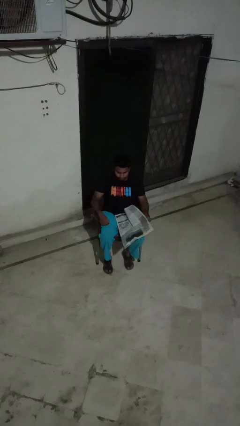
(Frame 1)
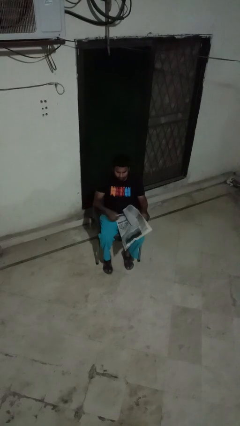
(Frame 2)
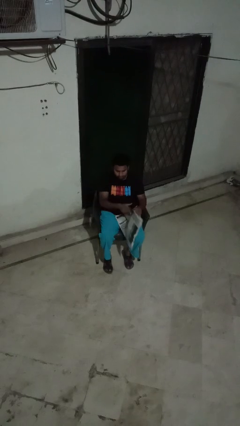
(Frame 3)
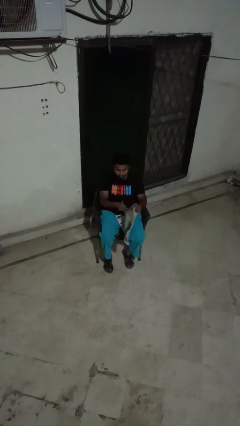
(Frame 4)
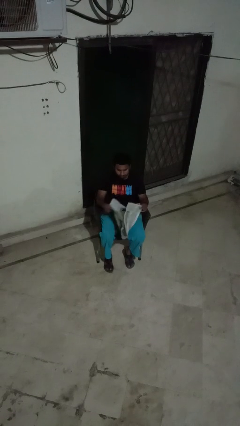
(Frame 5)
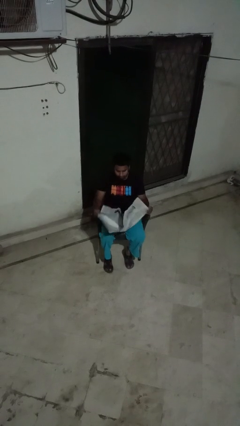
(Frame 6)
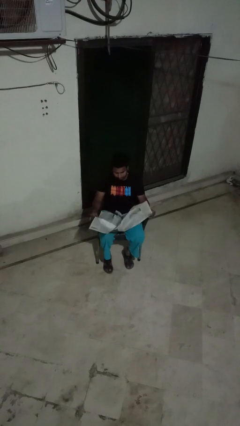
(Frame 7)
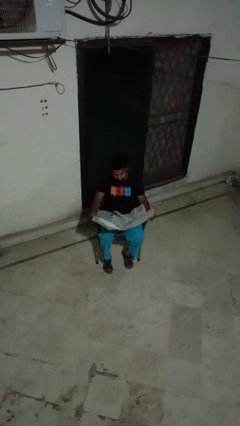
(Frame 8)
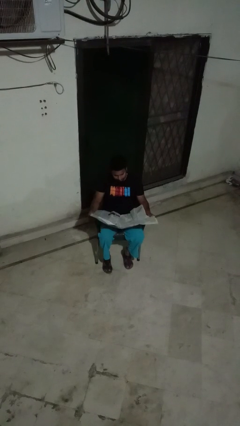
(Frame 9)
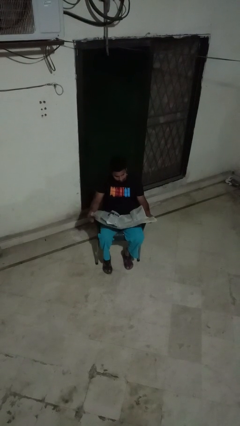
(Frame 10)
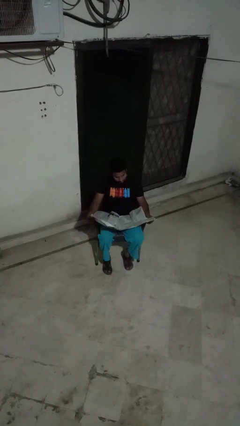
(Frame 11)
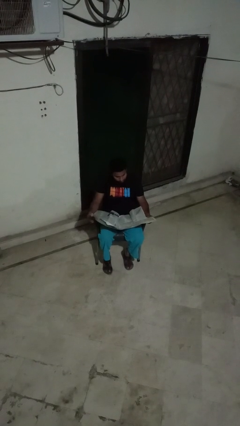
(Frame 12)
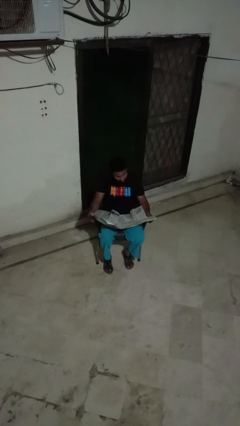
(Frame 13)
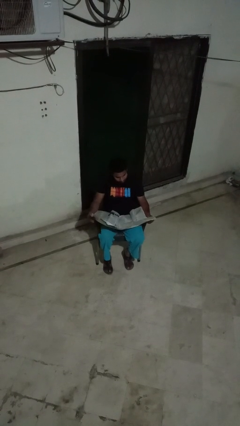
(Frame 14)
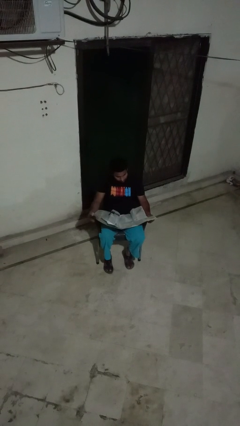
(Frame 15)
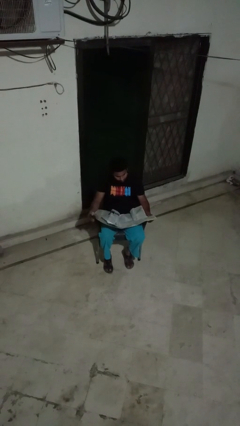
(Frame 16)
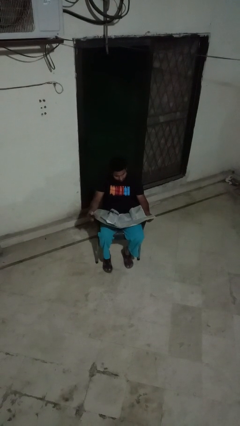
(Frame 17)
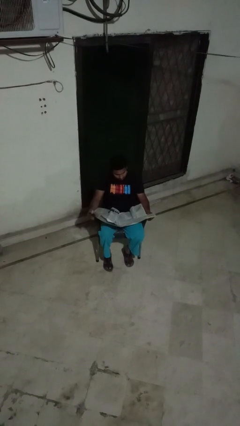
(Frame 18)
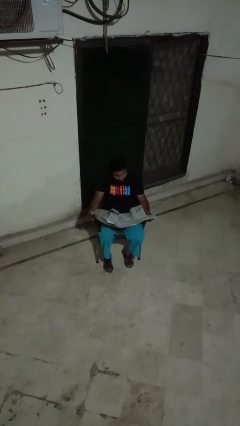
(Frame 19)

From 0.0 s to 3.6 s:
person reads newspaper

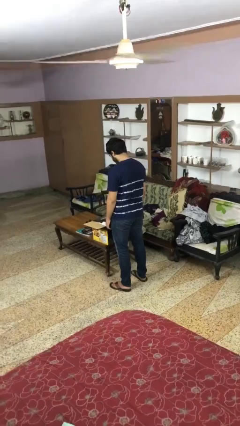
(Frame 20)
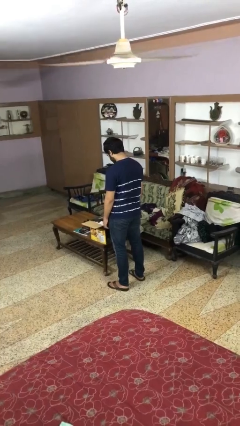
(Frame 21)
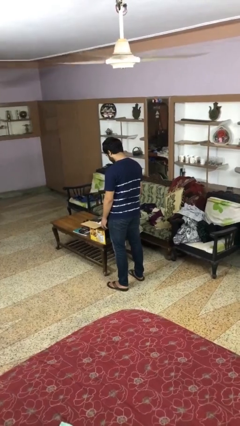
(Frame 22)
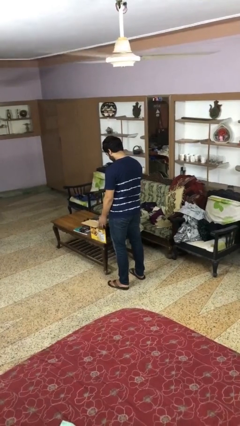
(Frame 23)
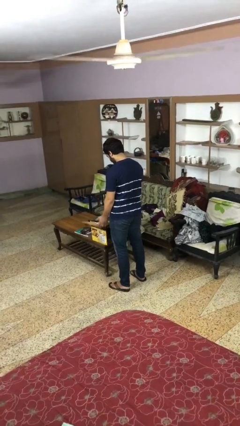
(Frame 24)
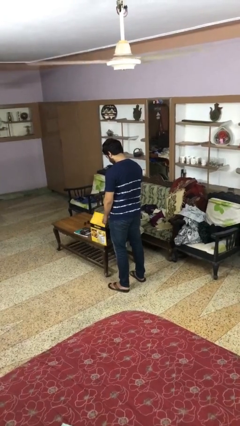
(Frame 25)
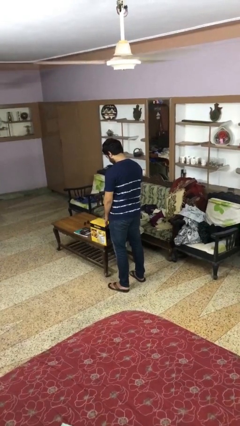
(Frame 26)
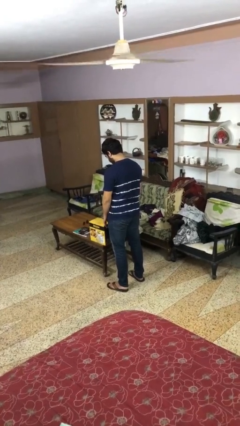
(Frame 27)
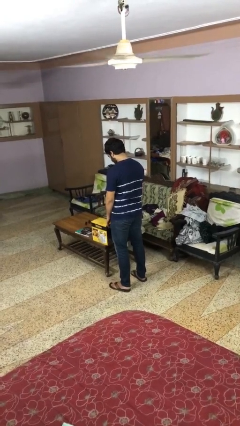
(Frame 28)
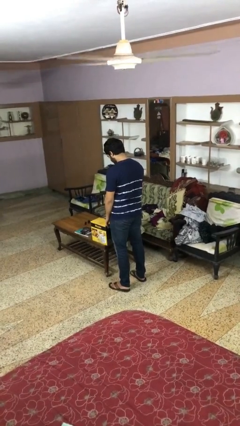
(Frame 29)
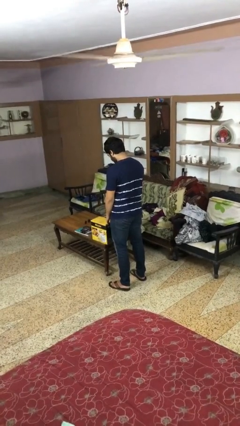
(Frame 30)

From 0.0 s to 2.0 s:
person closes box

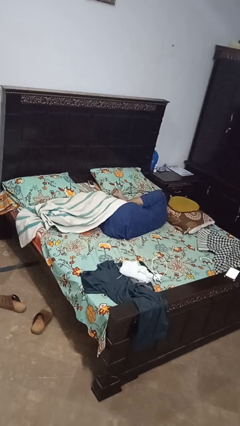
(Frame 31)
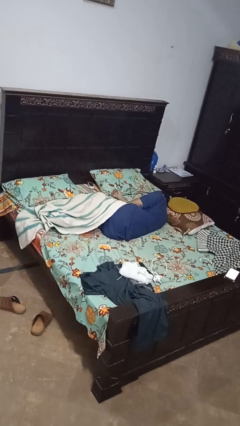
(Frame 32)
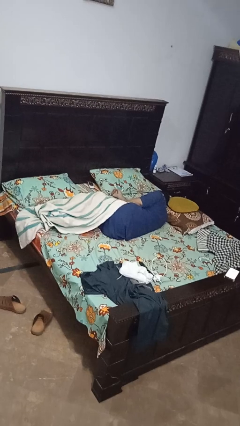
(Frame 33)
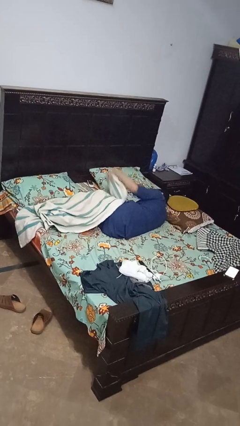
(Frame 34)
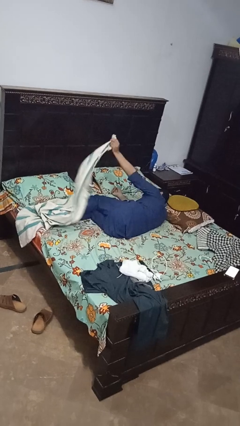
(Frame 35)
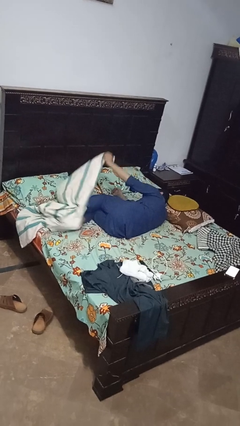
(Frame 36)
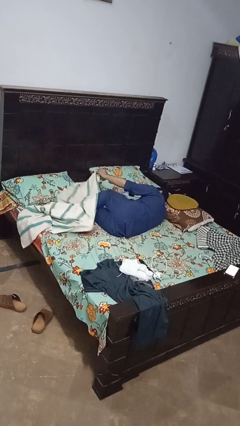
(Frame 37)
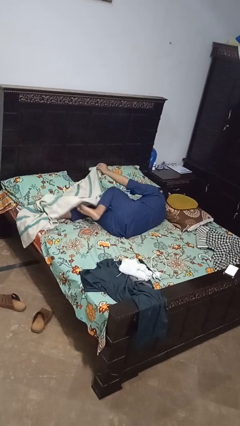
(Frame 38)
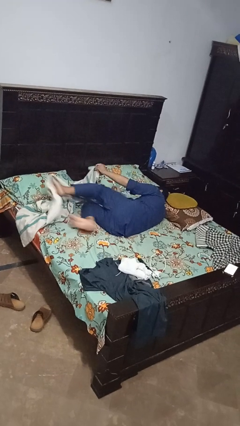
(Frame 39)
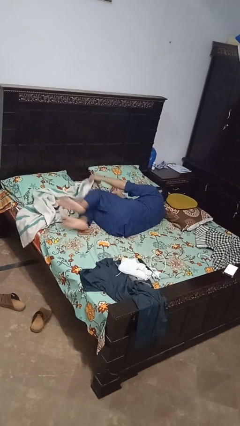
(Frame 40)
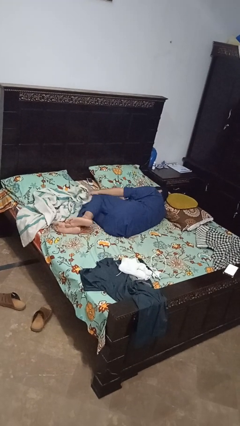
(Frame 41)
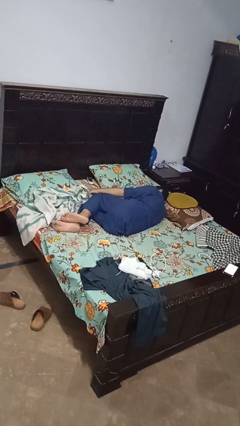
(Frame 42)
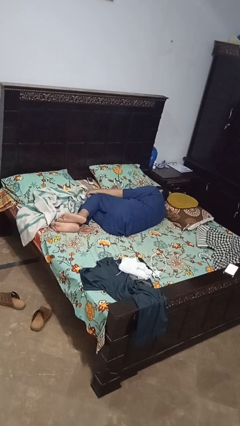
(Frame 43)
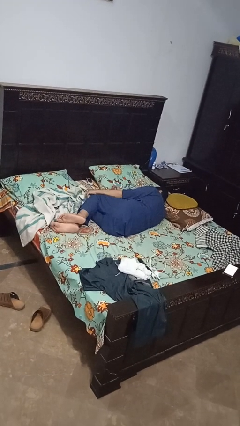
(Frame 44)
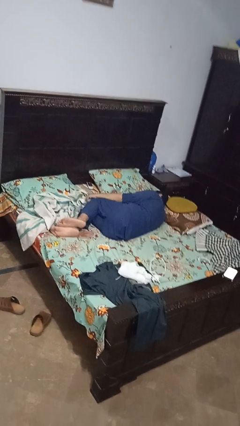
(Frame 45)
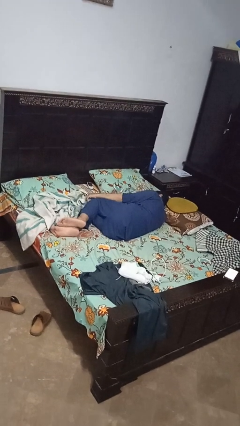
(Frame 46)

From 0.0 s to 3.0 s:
person uncovers with bedsheets

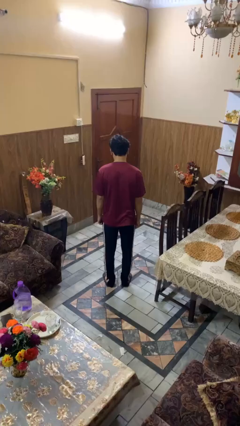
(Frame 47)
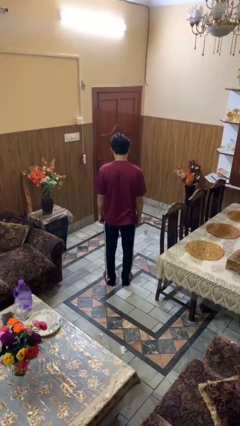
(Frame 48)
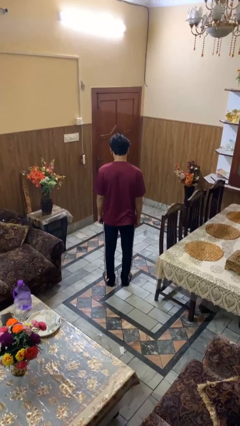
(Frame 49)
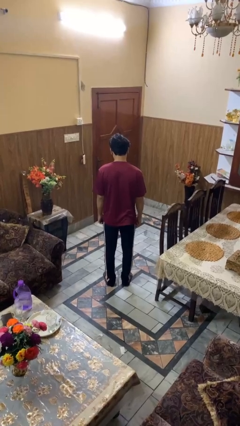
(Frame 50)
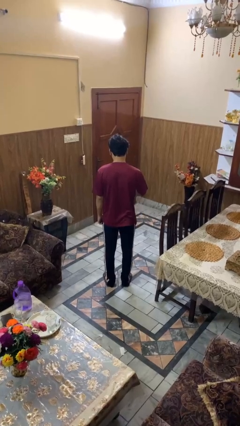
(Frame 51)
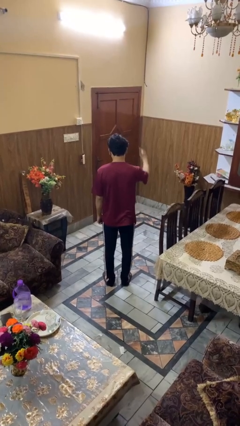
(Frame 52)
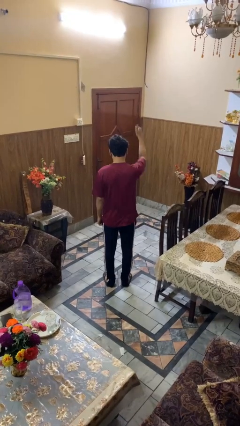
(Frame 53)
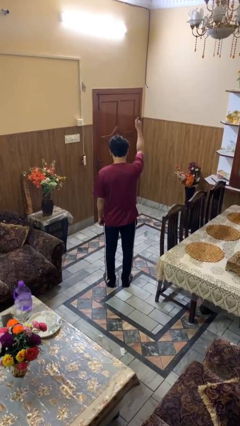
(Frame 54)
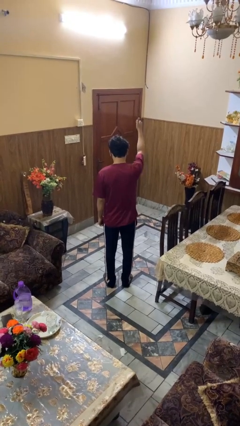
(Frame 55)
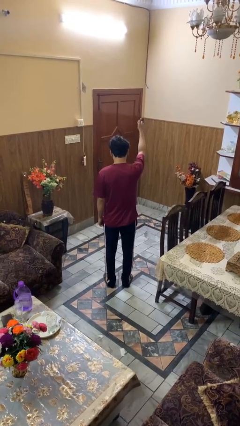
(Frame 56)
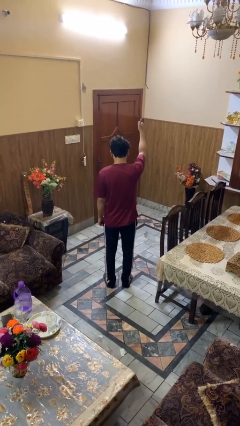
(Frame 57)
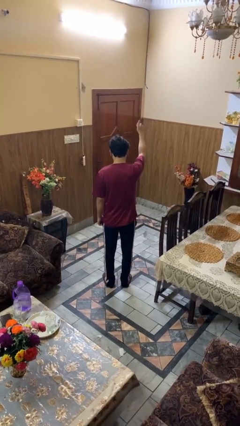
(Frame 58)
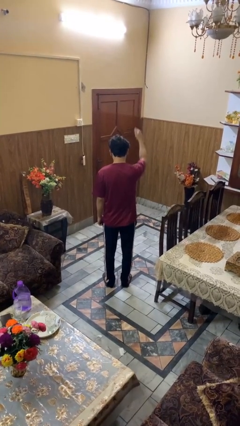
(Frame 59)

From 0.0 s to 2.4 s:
person gestures thumbs up

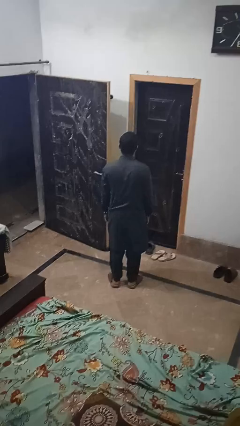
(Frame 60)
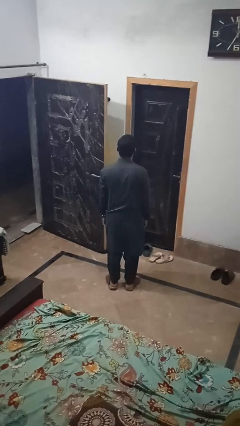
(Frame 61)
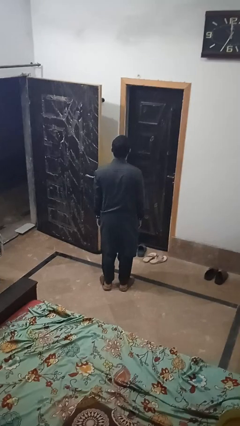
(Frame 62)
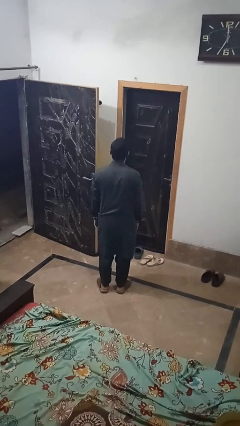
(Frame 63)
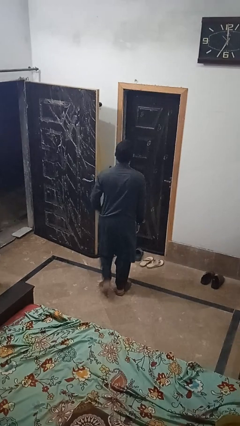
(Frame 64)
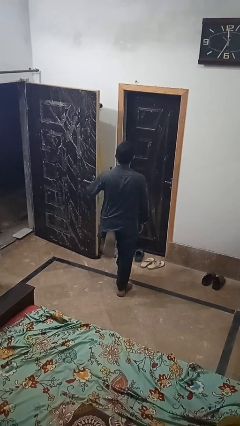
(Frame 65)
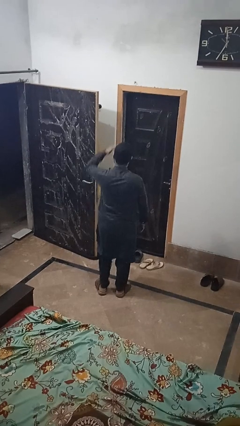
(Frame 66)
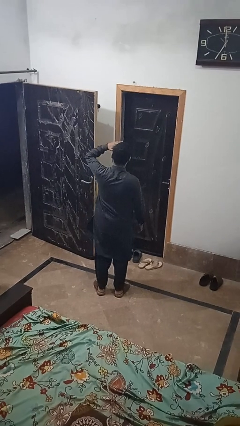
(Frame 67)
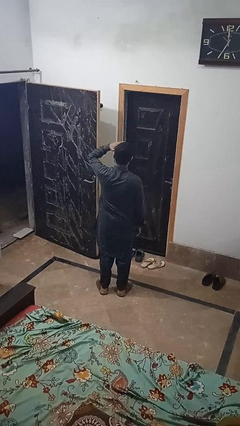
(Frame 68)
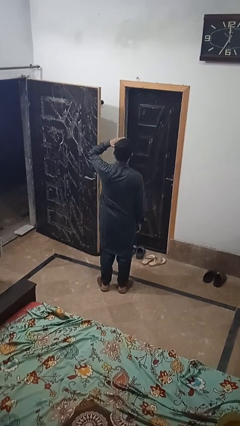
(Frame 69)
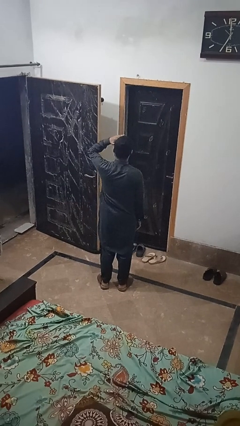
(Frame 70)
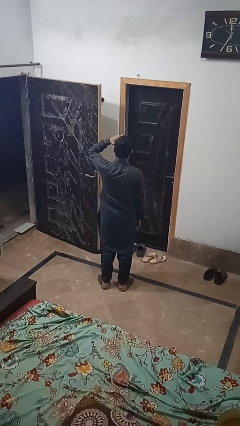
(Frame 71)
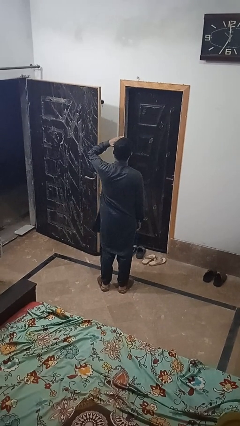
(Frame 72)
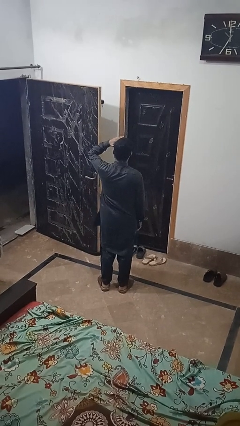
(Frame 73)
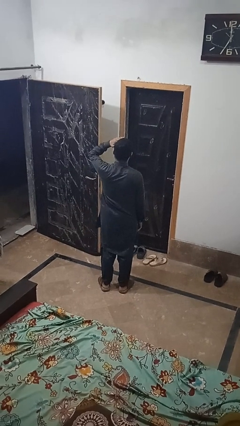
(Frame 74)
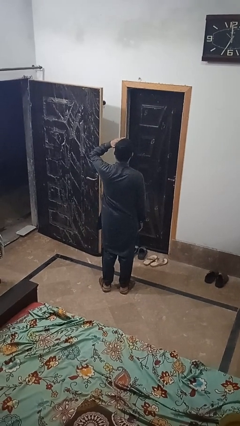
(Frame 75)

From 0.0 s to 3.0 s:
person salutes

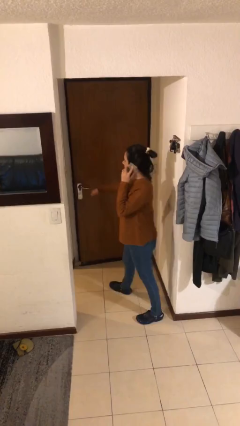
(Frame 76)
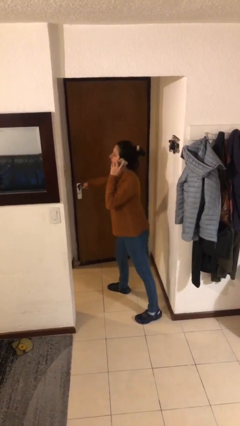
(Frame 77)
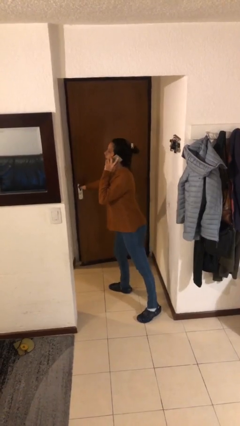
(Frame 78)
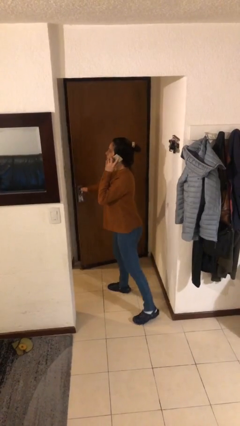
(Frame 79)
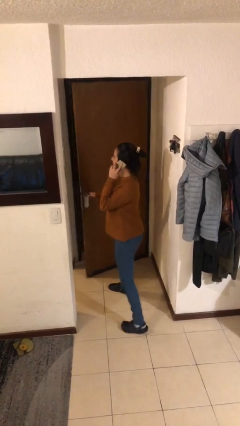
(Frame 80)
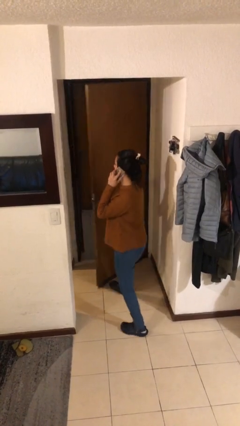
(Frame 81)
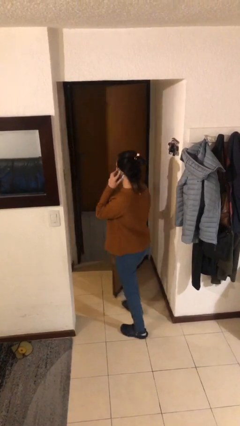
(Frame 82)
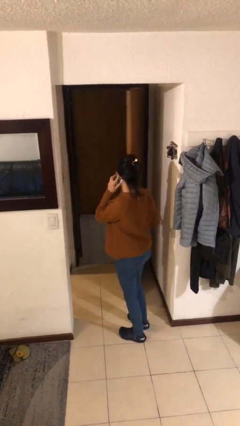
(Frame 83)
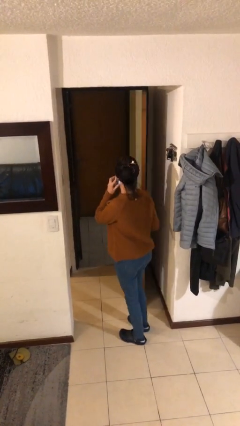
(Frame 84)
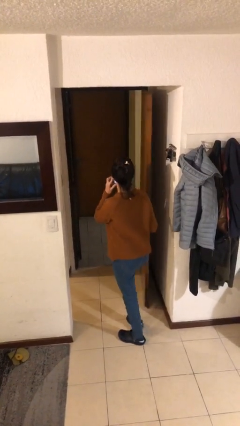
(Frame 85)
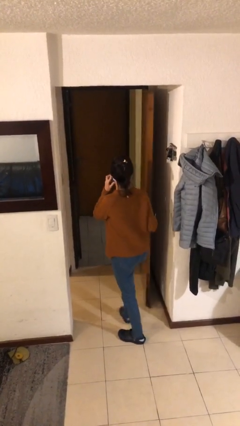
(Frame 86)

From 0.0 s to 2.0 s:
person opens facility door

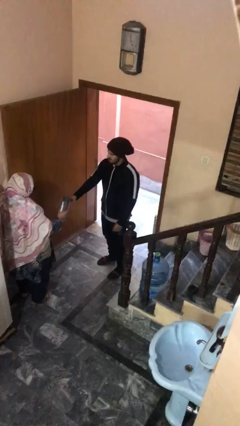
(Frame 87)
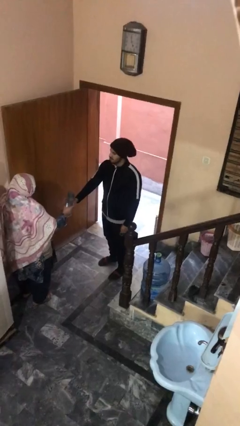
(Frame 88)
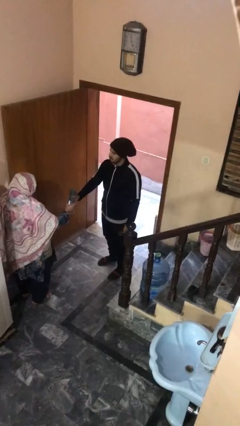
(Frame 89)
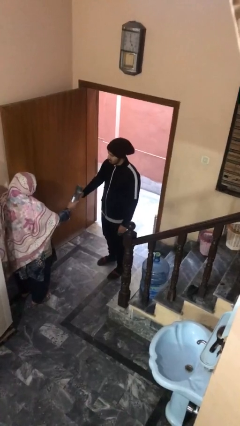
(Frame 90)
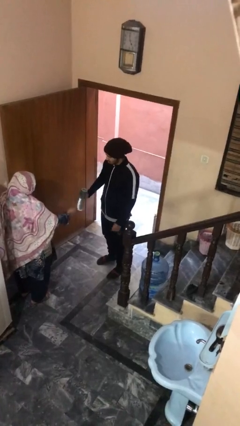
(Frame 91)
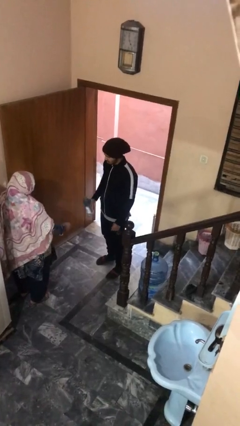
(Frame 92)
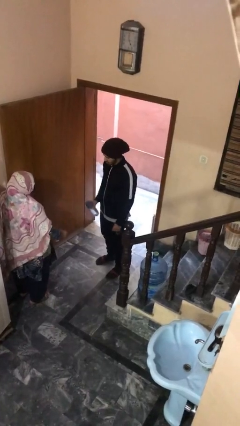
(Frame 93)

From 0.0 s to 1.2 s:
person transfers object to person
